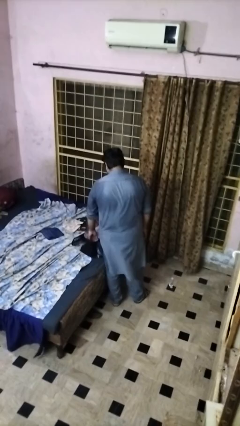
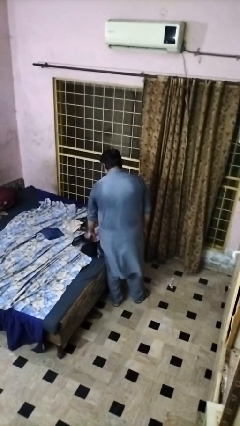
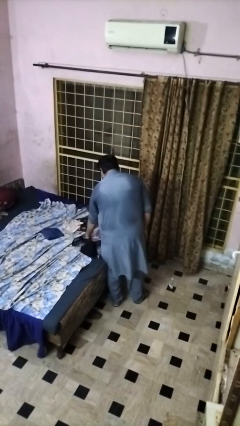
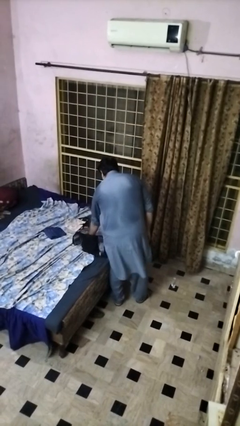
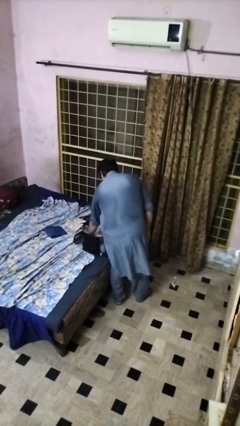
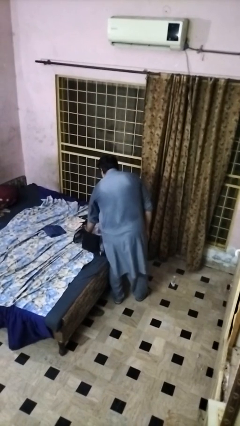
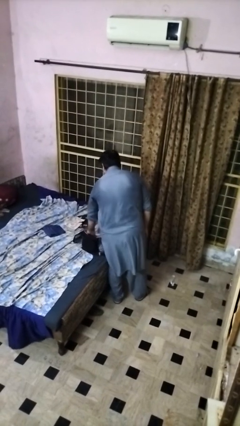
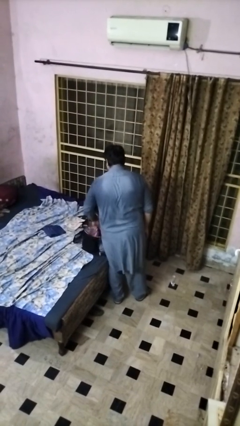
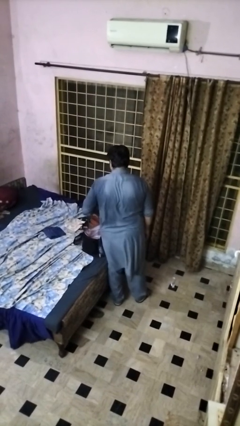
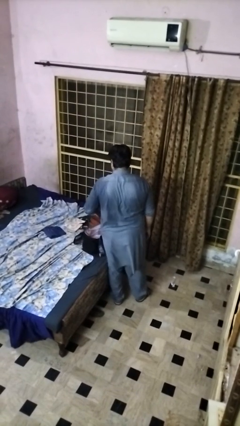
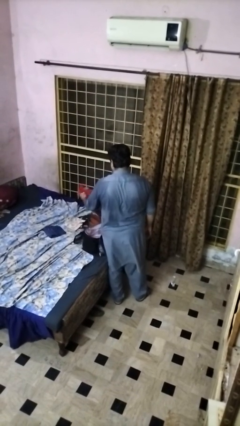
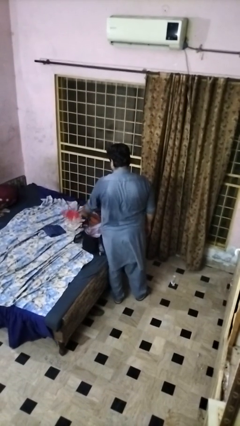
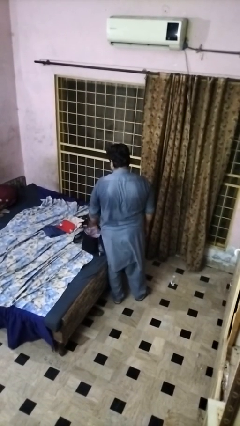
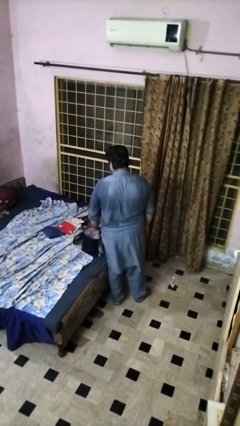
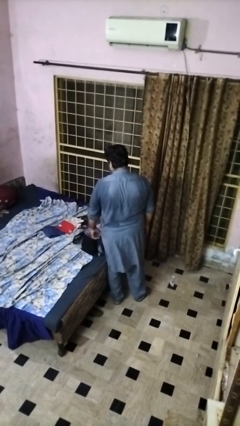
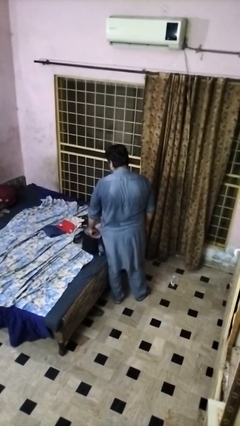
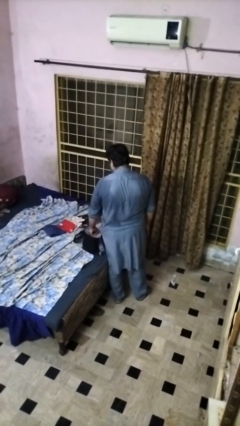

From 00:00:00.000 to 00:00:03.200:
person unloads clothes from suitcase

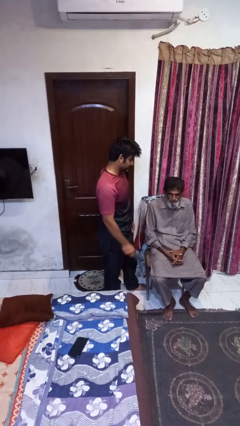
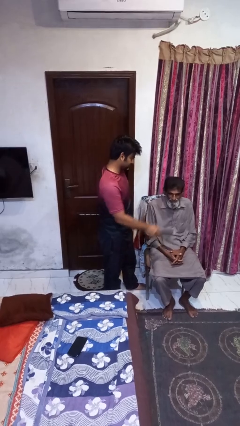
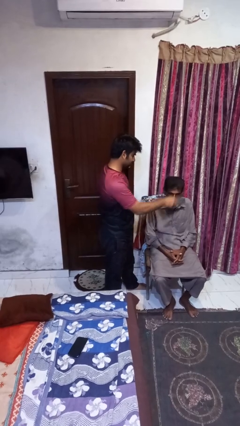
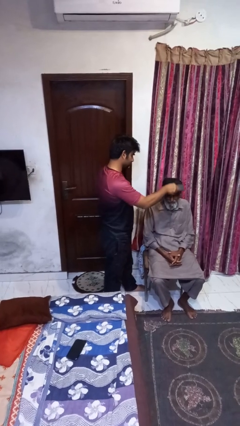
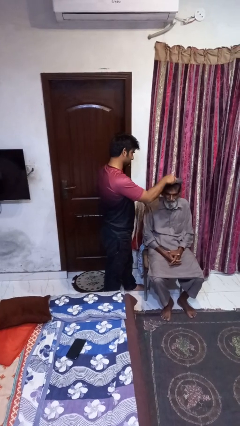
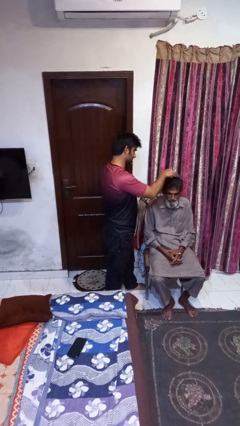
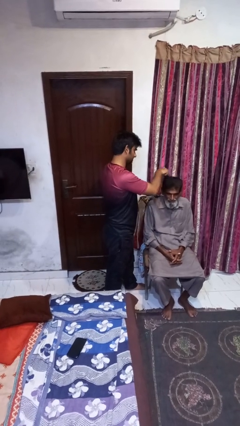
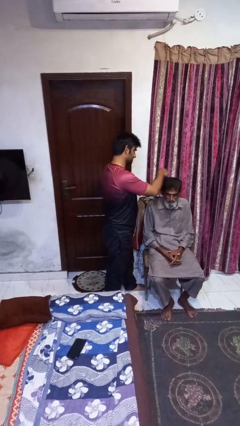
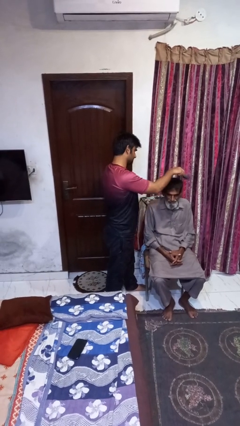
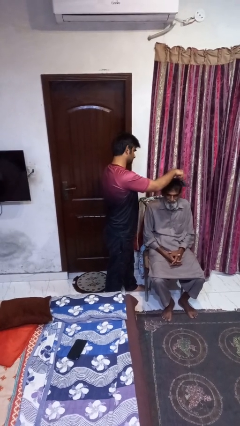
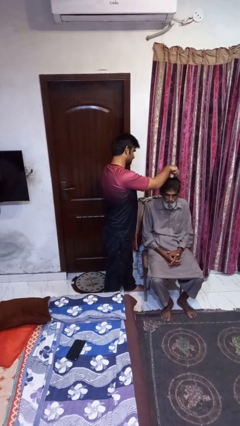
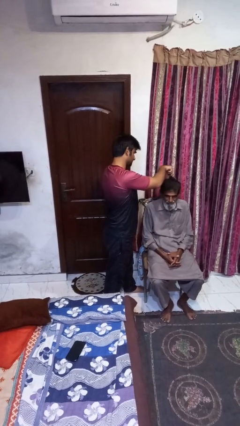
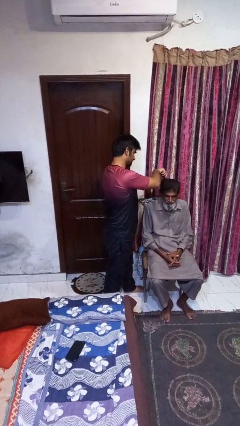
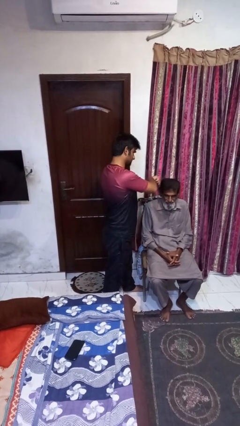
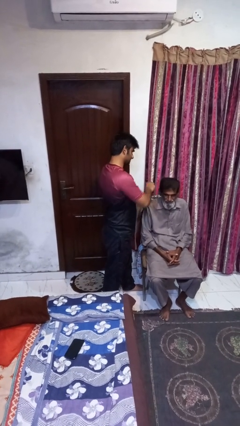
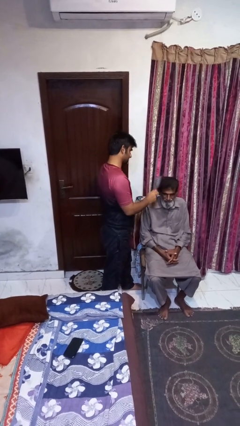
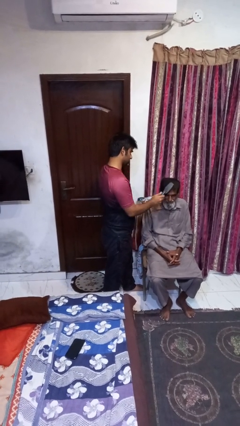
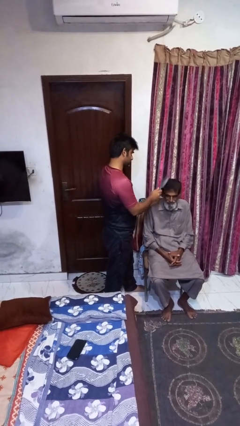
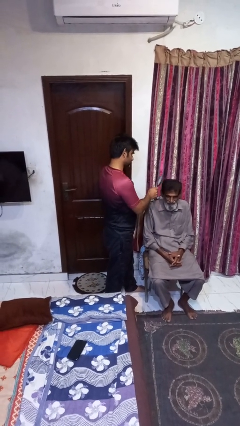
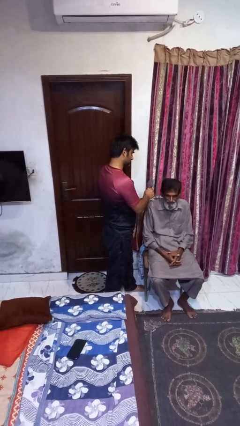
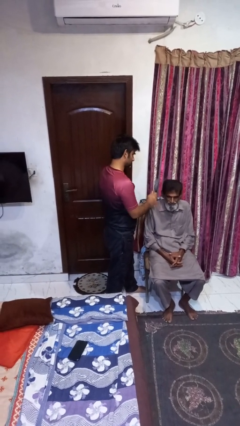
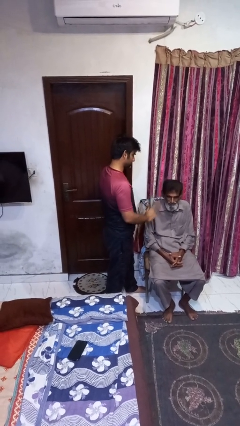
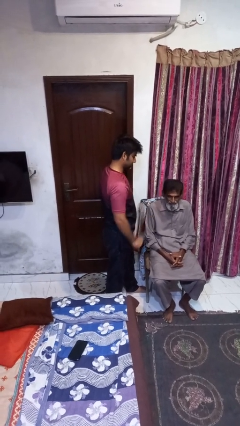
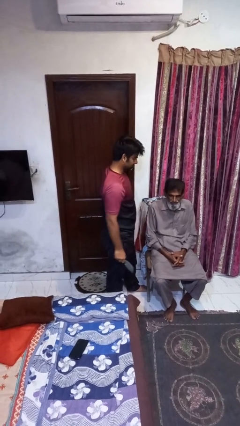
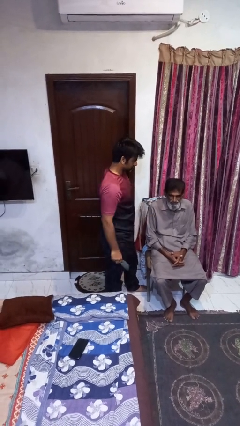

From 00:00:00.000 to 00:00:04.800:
person brushes hair of person

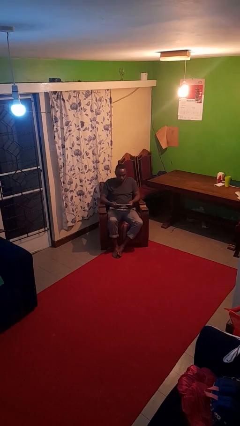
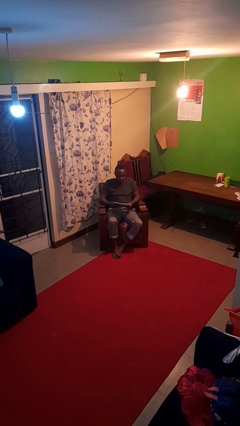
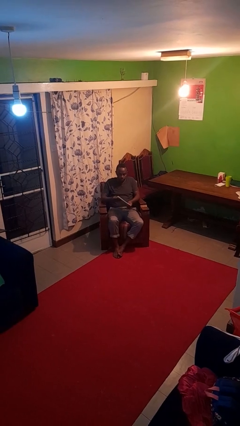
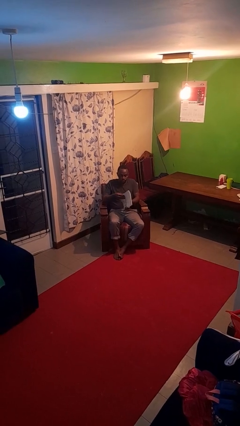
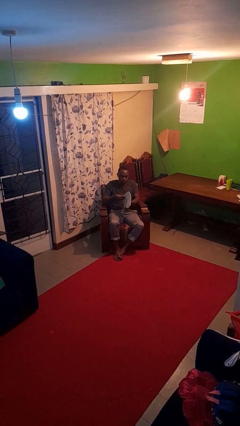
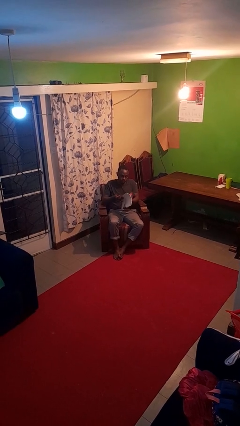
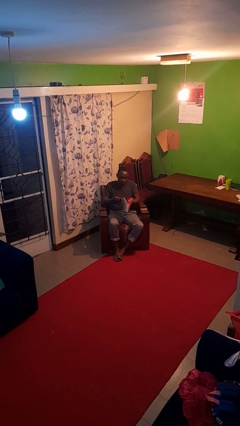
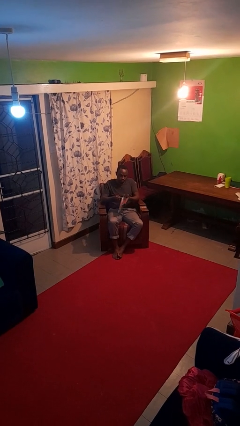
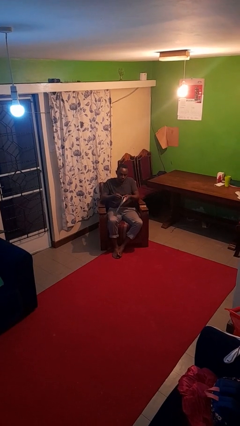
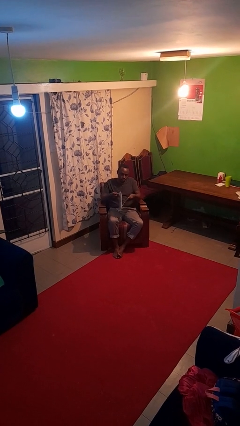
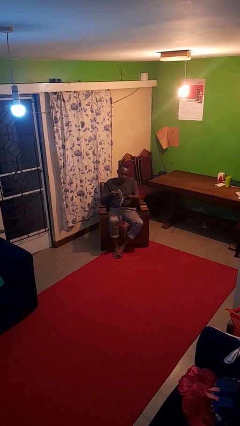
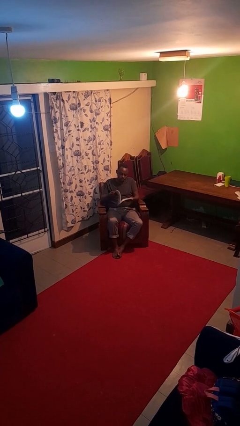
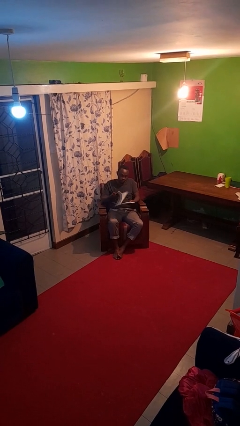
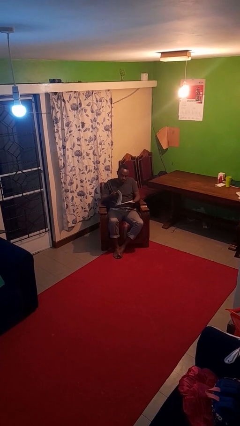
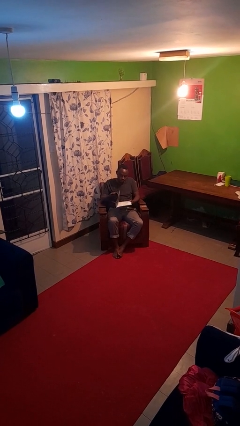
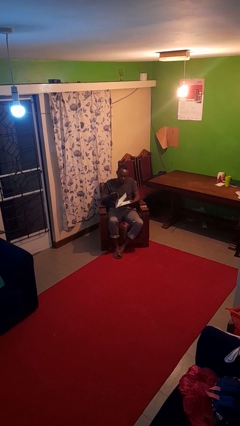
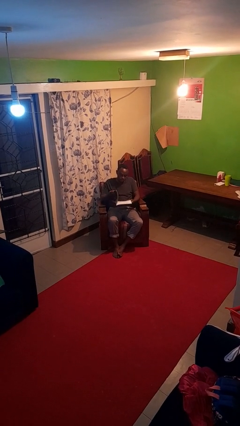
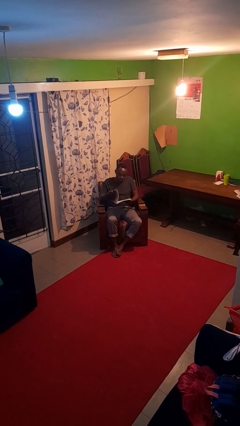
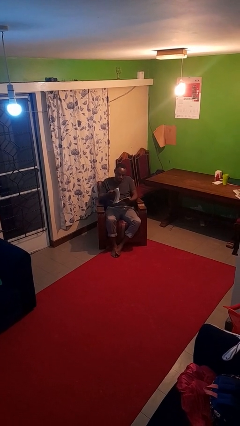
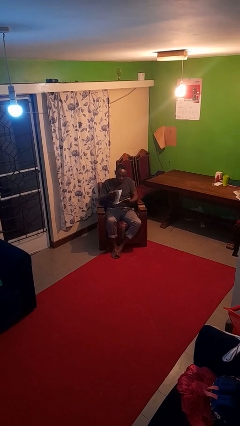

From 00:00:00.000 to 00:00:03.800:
person reads magazine

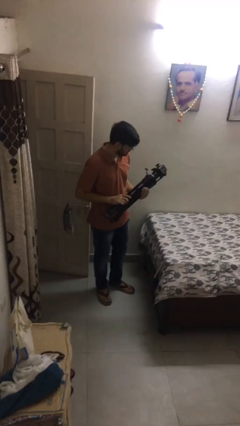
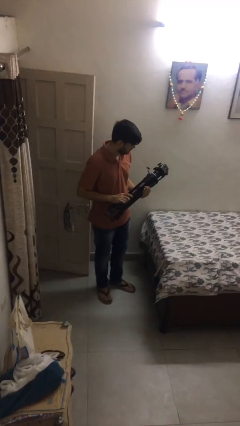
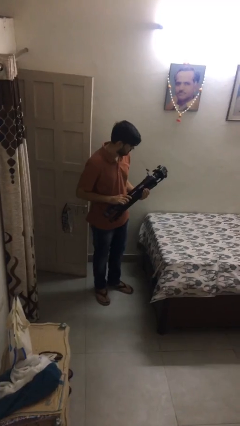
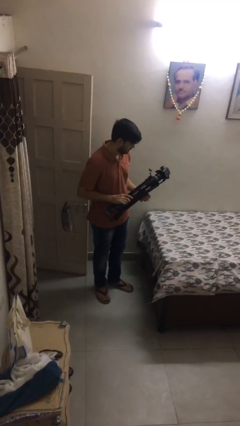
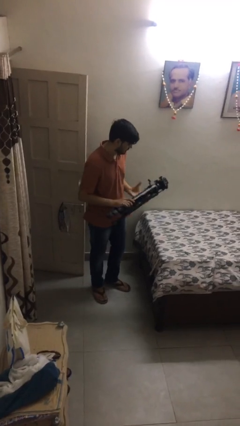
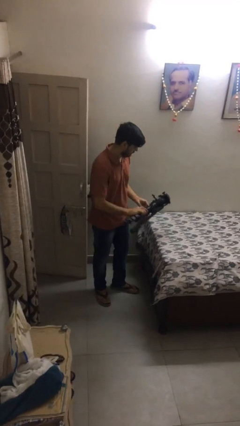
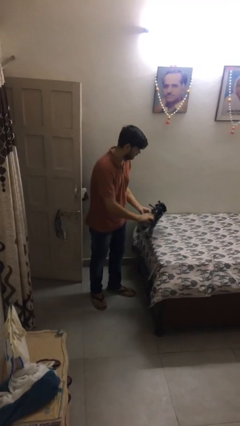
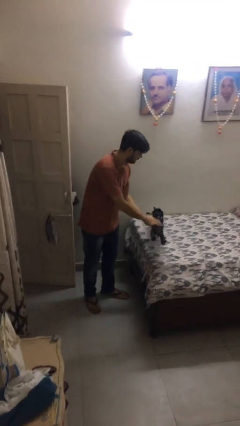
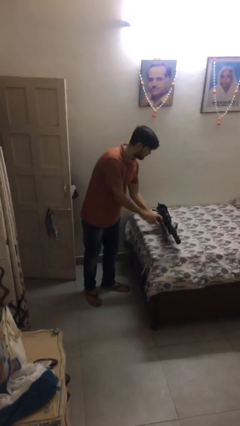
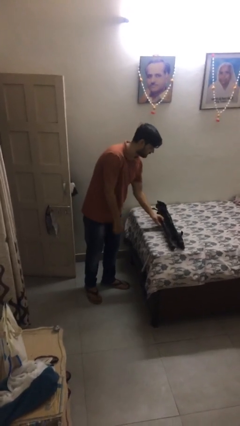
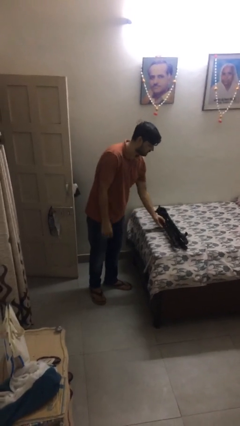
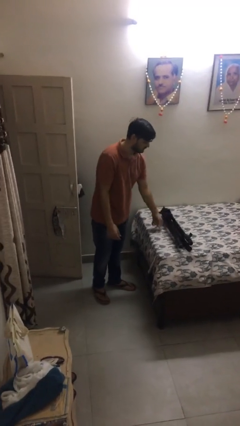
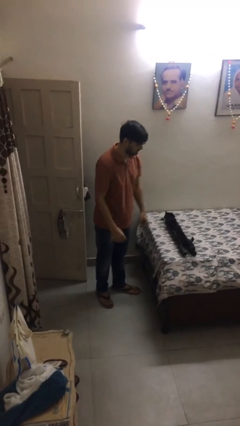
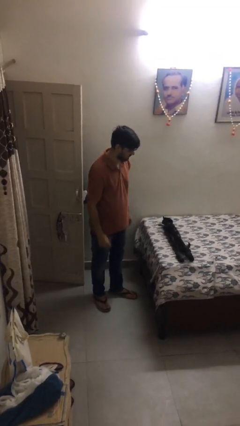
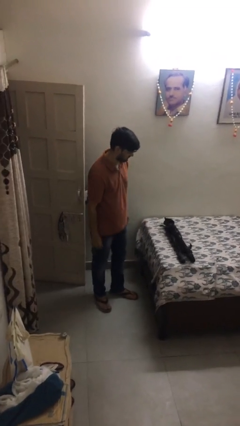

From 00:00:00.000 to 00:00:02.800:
person puts down object on bed

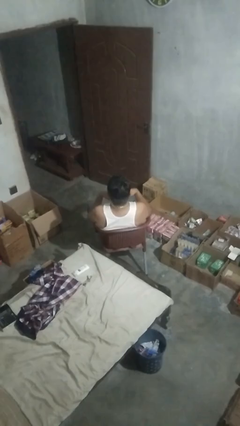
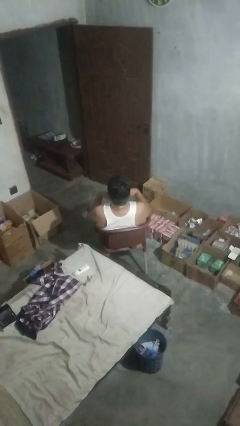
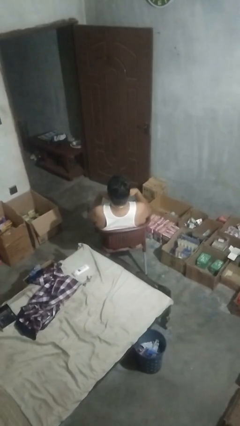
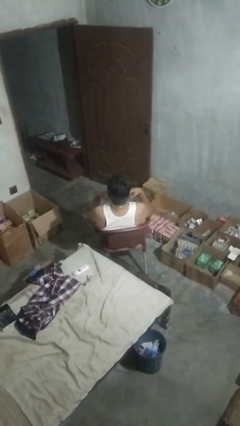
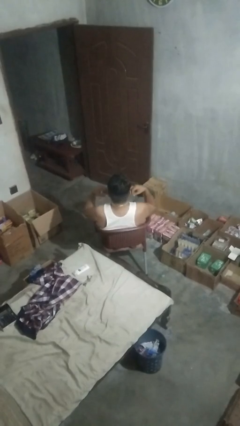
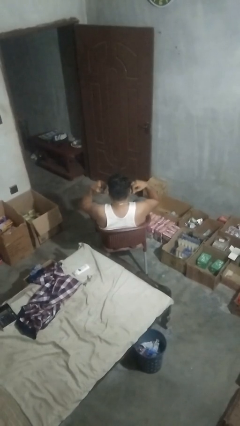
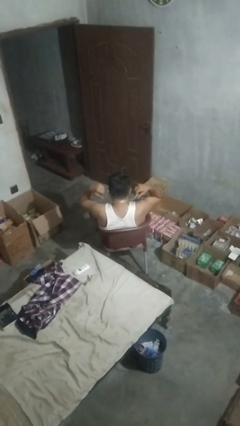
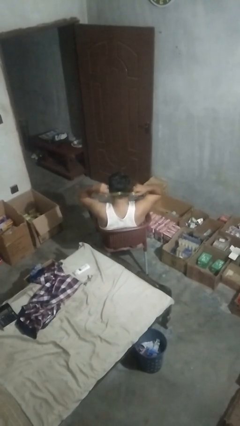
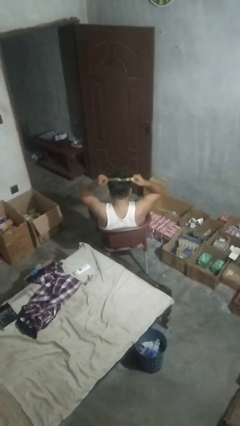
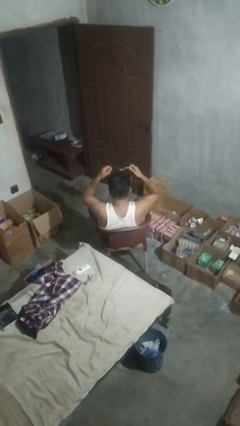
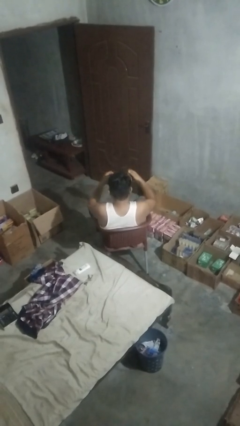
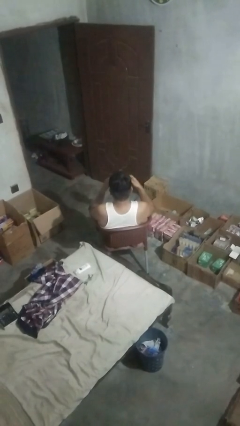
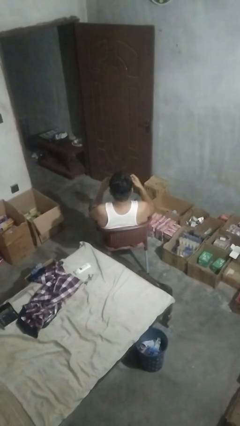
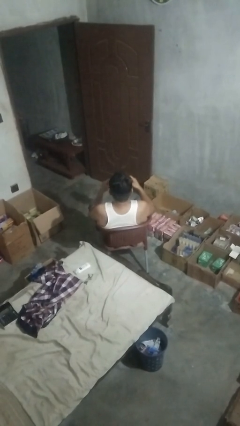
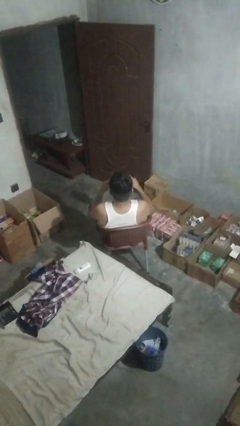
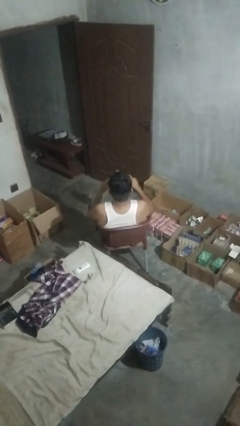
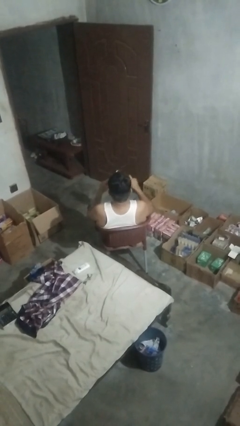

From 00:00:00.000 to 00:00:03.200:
person takes off necklace
